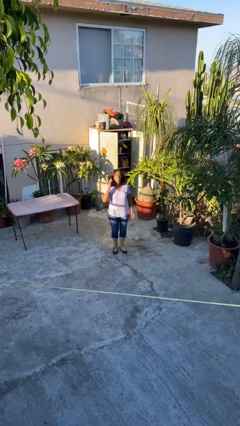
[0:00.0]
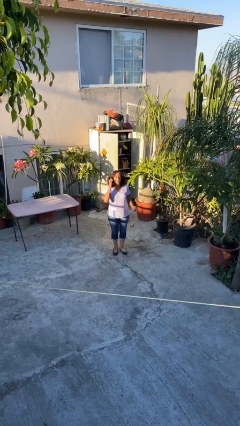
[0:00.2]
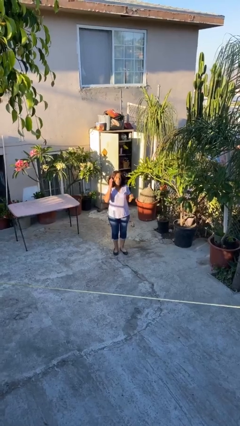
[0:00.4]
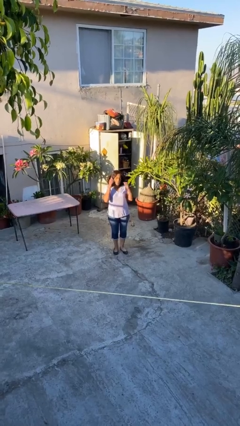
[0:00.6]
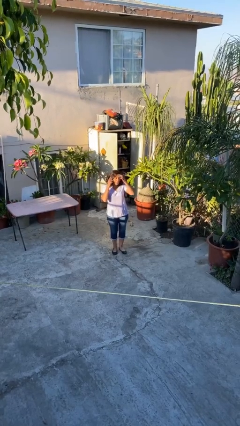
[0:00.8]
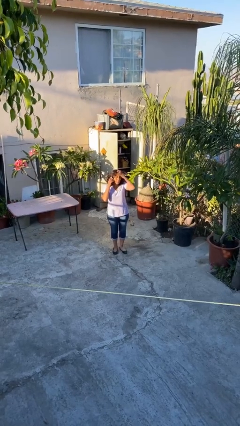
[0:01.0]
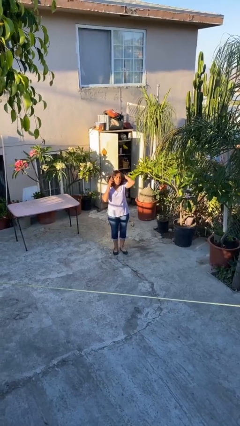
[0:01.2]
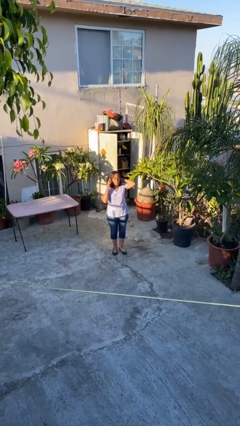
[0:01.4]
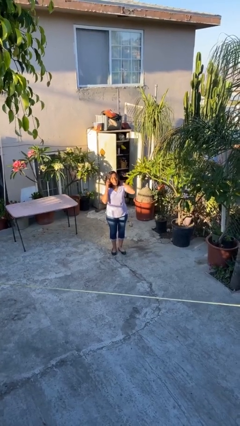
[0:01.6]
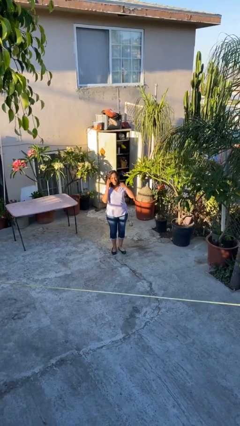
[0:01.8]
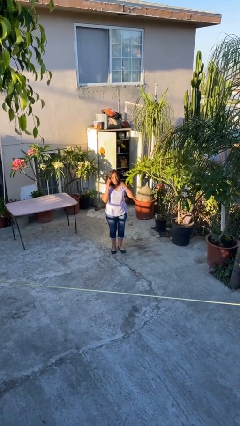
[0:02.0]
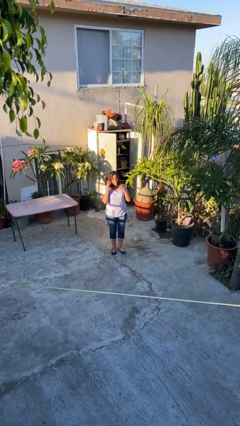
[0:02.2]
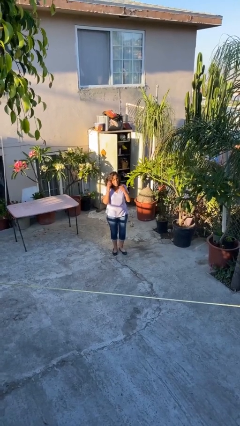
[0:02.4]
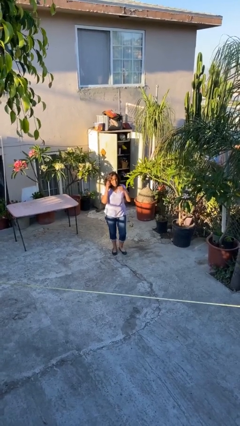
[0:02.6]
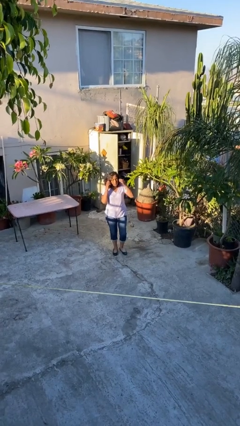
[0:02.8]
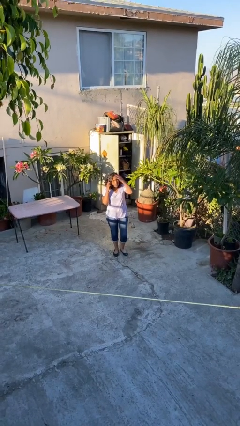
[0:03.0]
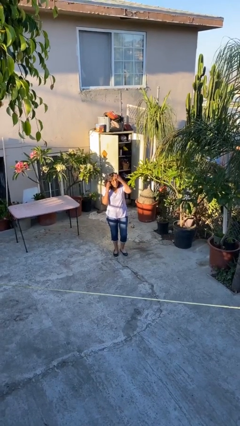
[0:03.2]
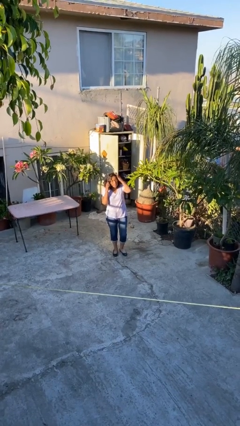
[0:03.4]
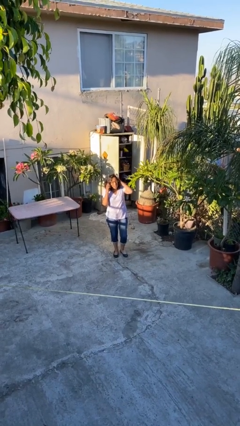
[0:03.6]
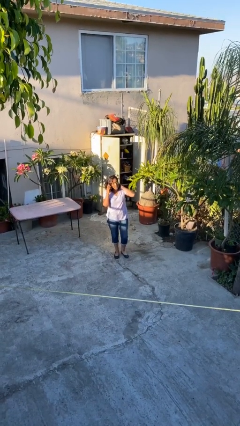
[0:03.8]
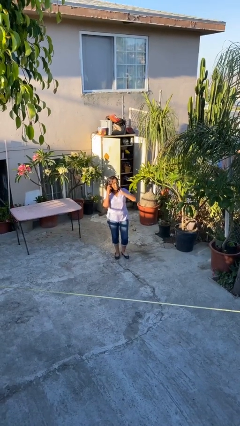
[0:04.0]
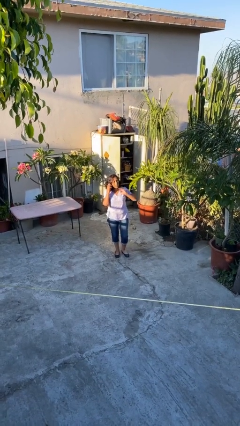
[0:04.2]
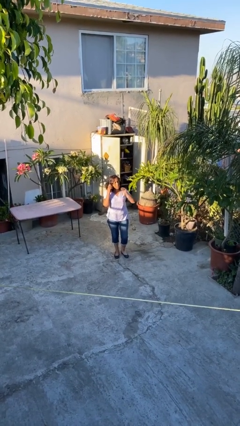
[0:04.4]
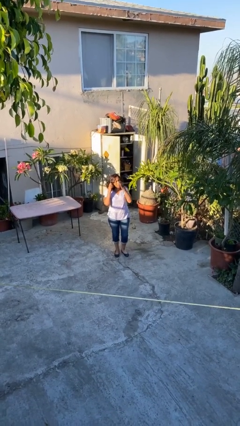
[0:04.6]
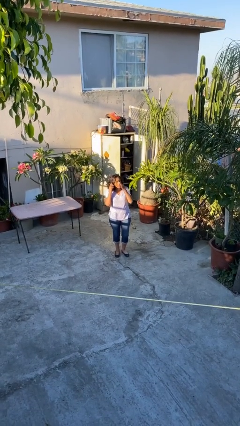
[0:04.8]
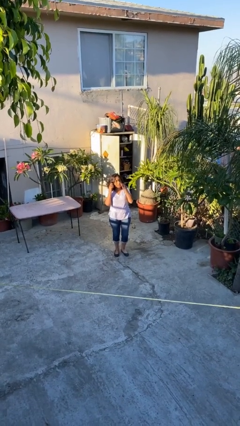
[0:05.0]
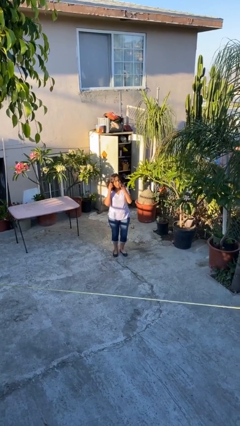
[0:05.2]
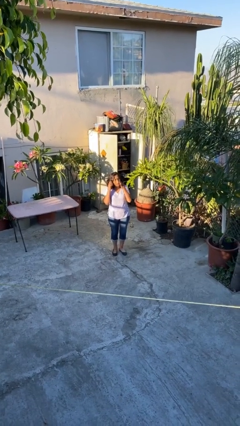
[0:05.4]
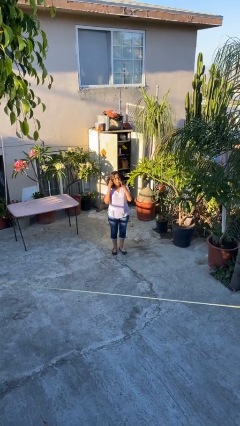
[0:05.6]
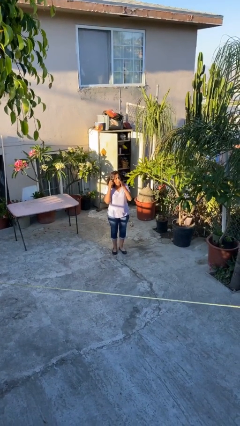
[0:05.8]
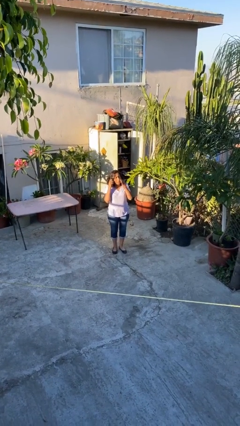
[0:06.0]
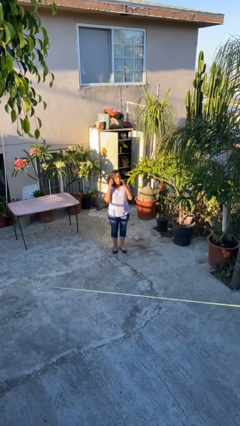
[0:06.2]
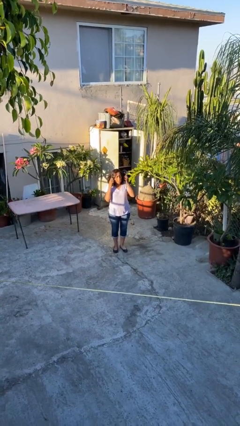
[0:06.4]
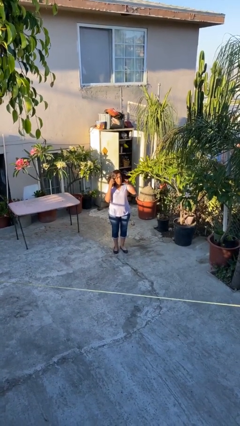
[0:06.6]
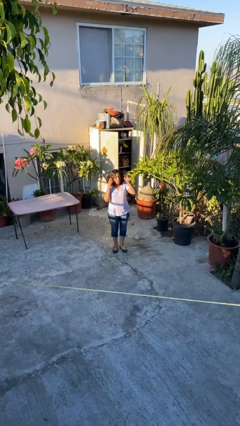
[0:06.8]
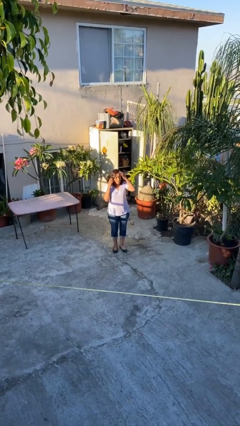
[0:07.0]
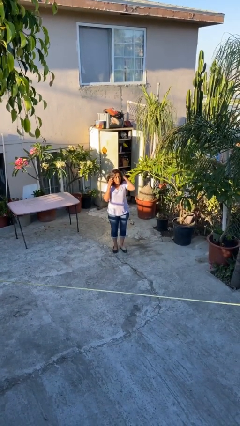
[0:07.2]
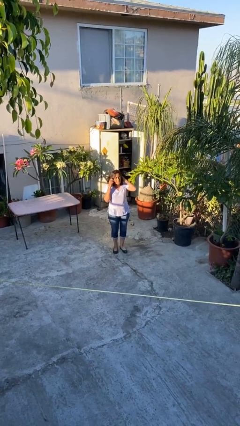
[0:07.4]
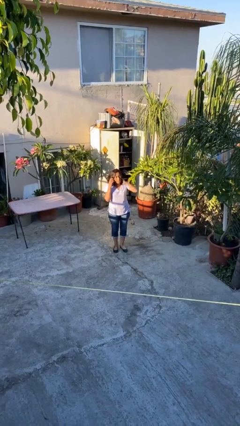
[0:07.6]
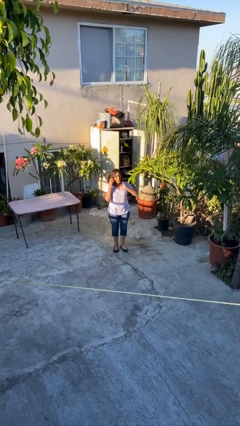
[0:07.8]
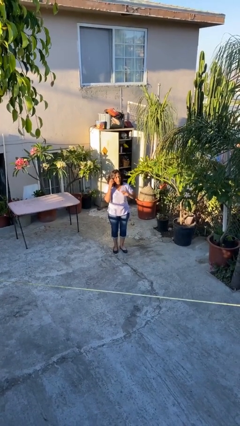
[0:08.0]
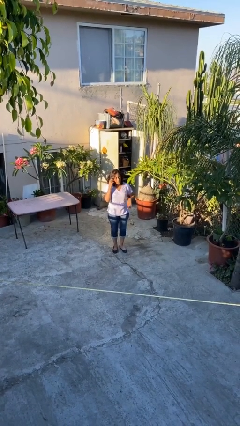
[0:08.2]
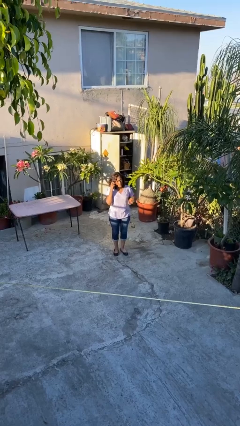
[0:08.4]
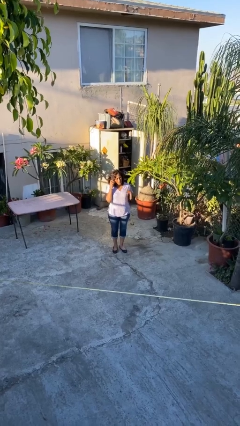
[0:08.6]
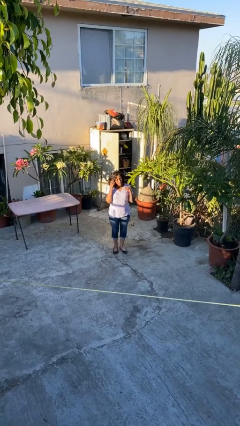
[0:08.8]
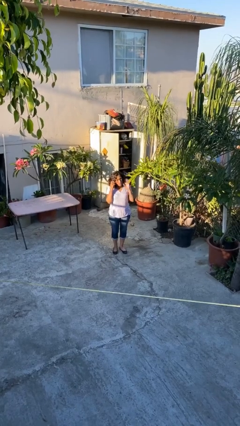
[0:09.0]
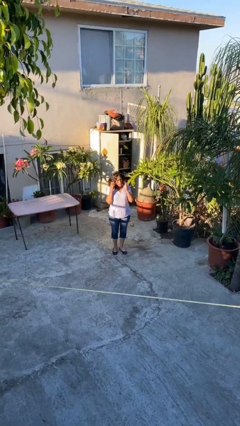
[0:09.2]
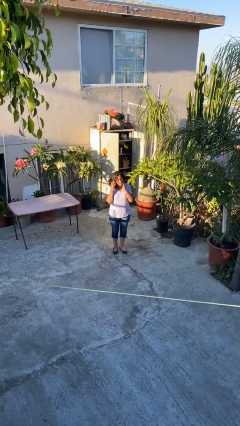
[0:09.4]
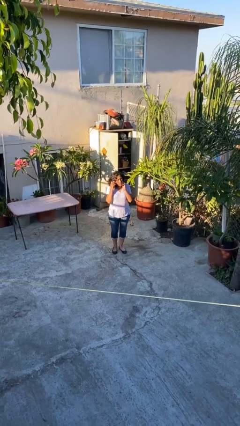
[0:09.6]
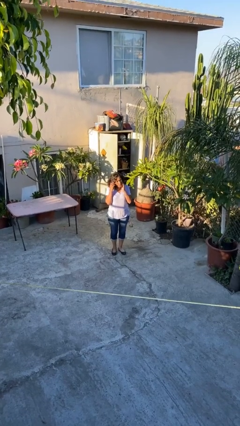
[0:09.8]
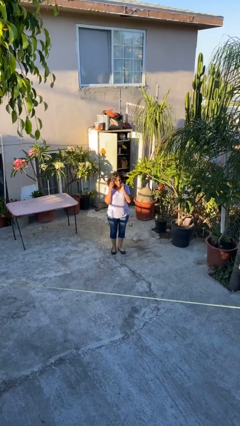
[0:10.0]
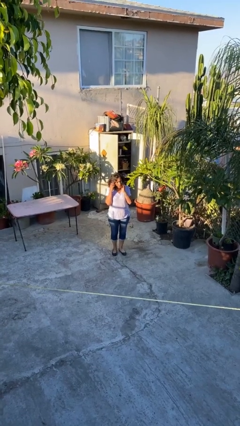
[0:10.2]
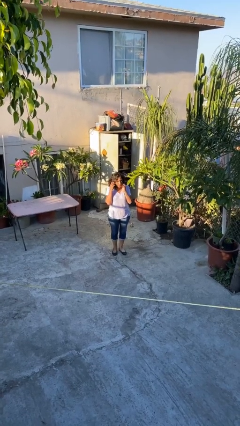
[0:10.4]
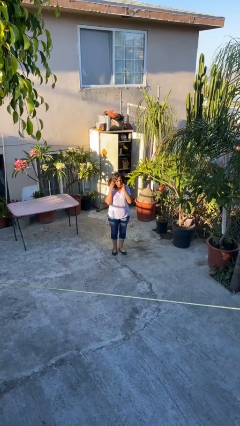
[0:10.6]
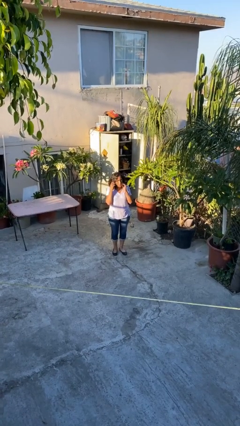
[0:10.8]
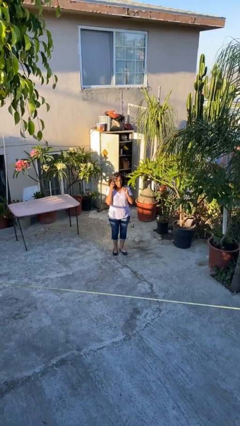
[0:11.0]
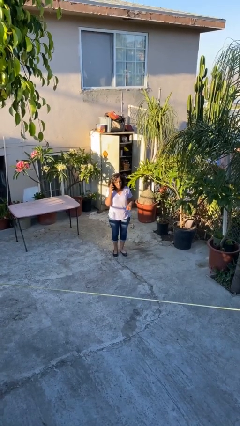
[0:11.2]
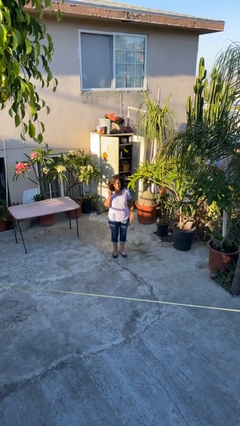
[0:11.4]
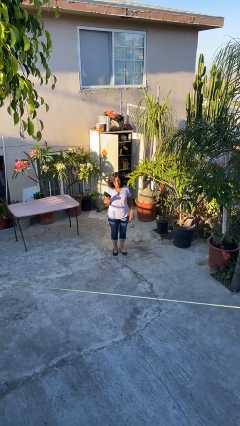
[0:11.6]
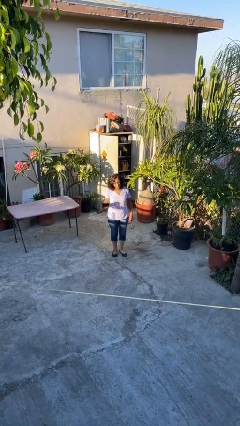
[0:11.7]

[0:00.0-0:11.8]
person talks on phone

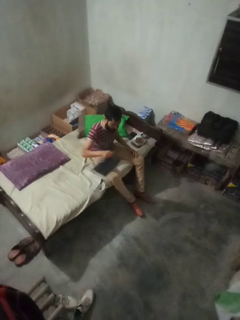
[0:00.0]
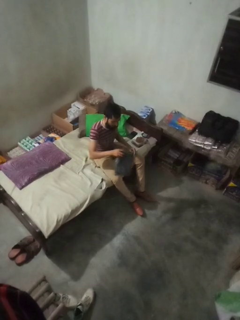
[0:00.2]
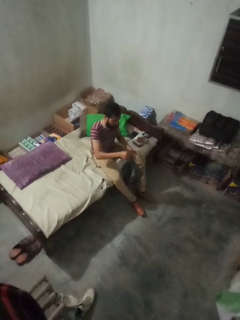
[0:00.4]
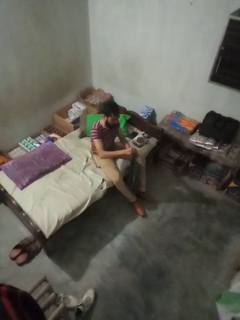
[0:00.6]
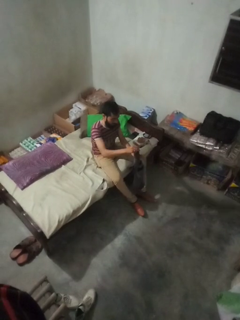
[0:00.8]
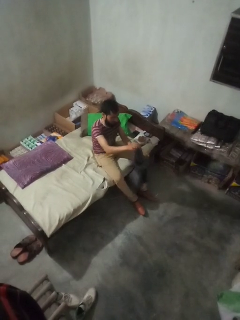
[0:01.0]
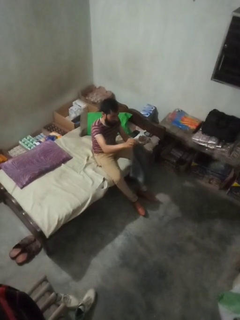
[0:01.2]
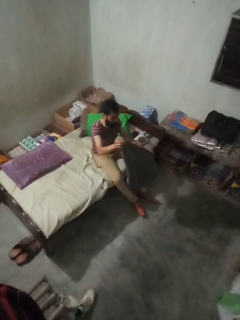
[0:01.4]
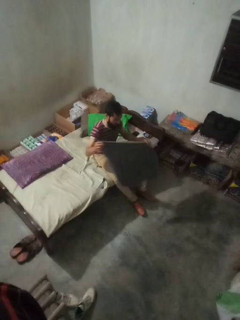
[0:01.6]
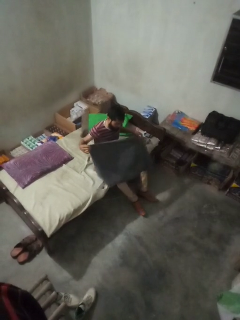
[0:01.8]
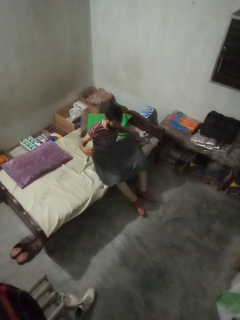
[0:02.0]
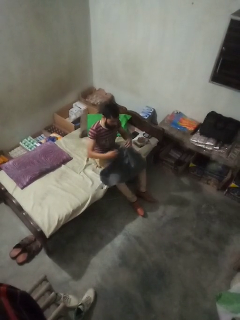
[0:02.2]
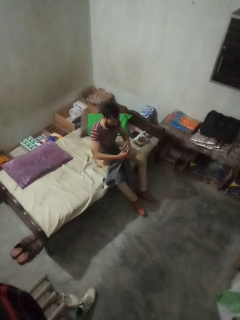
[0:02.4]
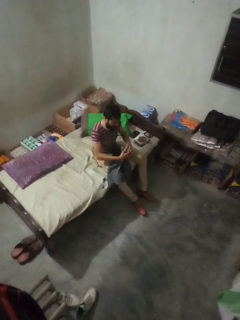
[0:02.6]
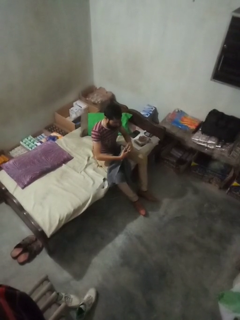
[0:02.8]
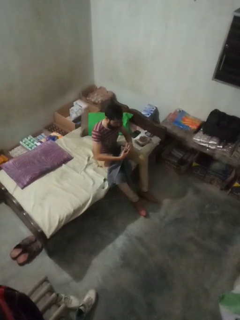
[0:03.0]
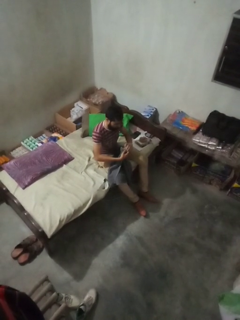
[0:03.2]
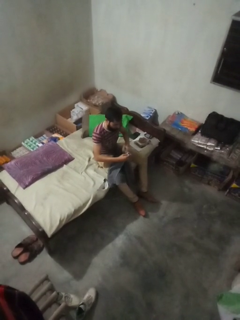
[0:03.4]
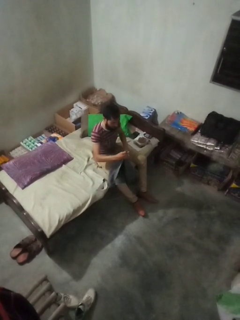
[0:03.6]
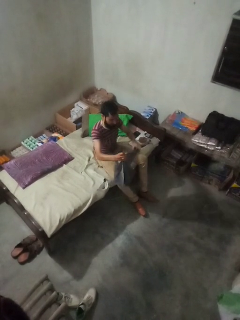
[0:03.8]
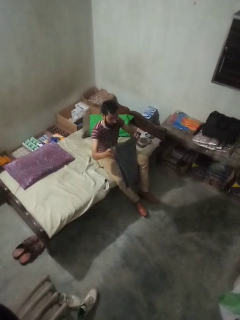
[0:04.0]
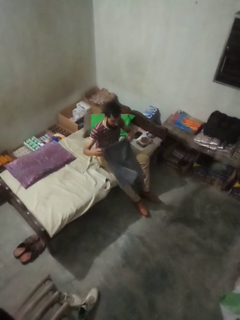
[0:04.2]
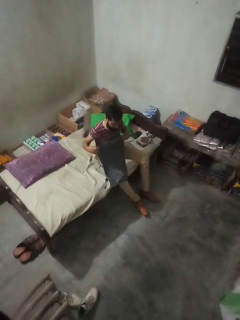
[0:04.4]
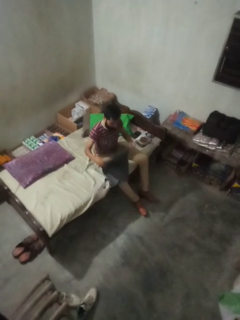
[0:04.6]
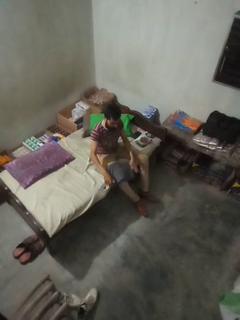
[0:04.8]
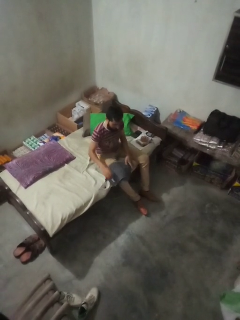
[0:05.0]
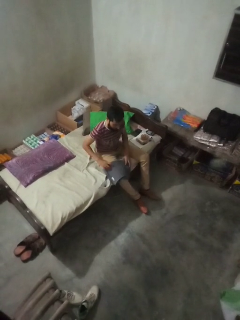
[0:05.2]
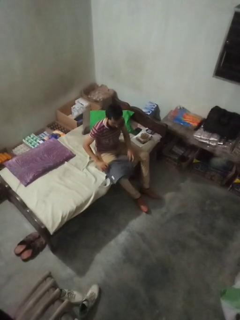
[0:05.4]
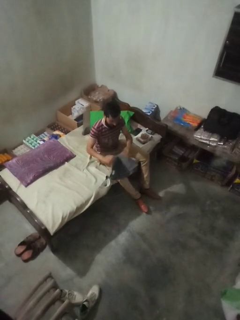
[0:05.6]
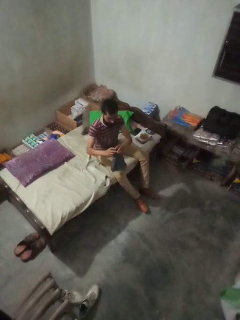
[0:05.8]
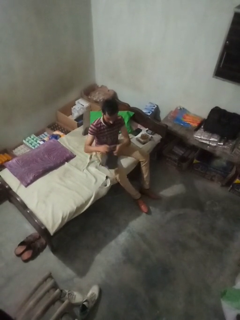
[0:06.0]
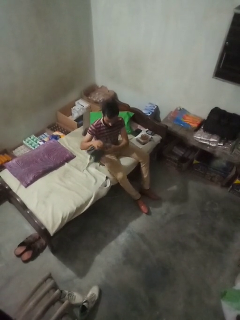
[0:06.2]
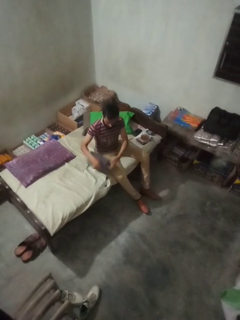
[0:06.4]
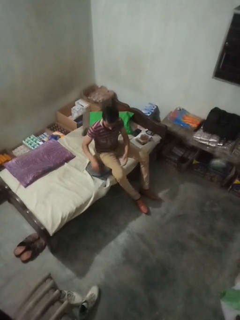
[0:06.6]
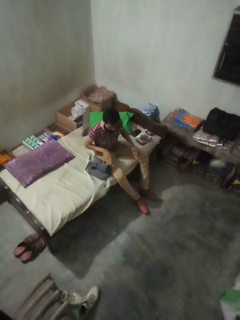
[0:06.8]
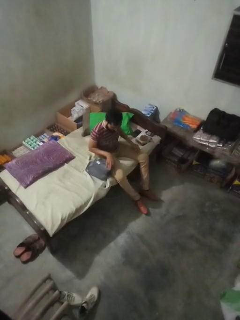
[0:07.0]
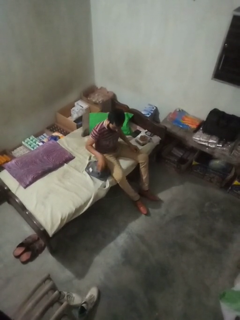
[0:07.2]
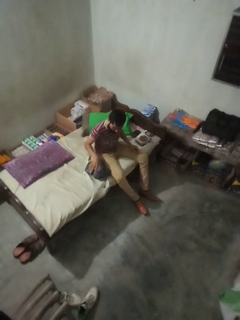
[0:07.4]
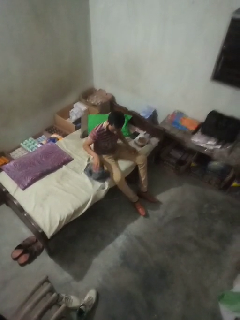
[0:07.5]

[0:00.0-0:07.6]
person folds towel

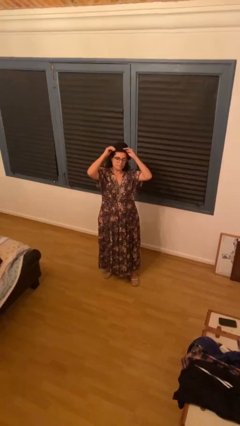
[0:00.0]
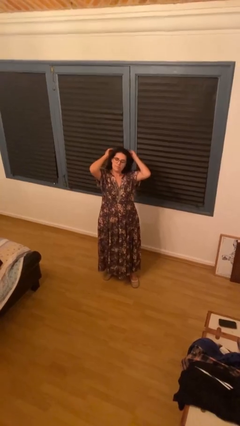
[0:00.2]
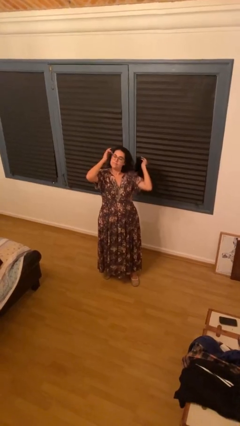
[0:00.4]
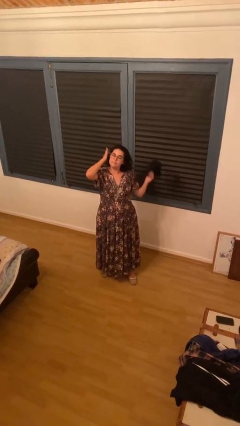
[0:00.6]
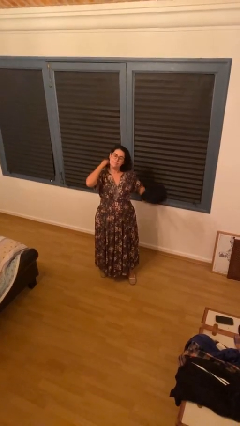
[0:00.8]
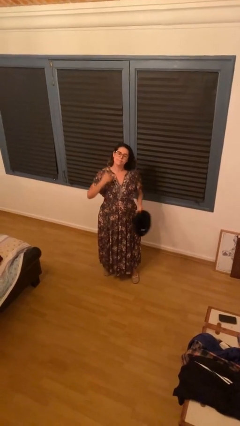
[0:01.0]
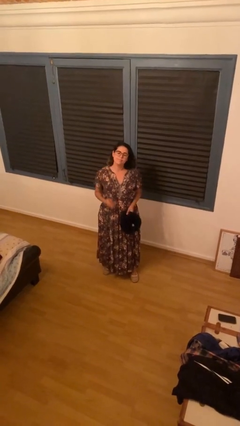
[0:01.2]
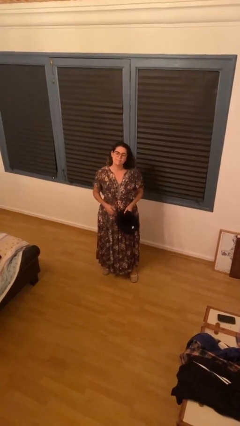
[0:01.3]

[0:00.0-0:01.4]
person takes off hat
